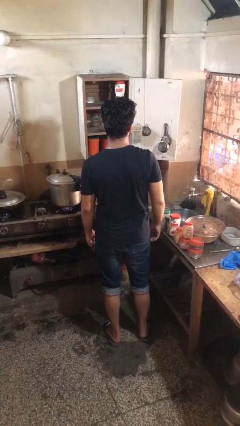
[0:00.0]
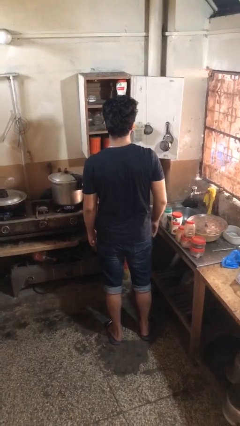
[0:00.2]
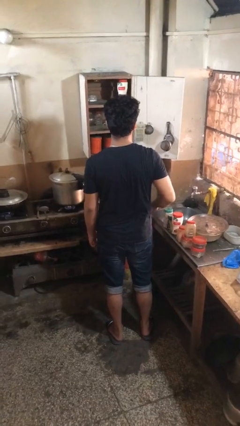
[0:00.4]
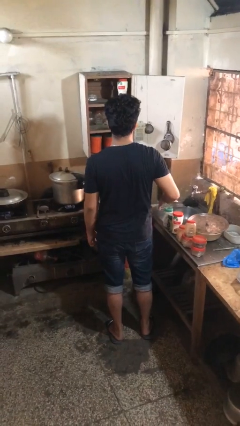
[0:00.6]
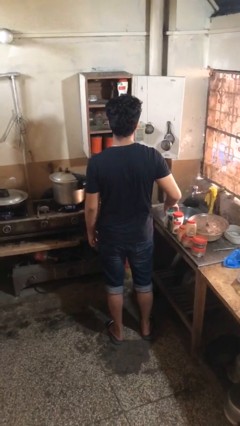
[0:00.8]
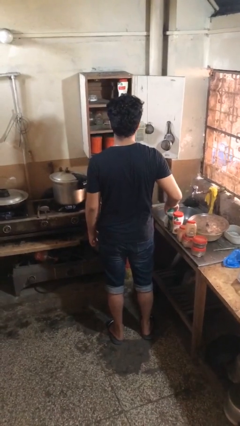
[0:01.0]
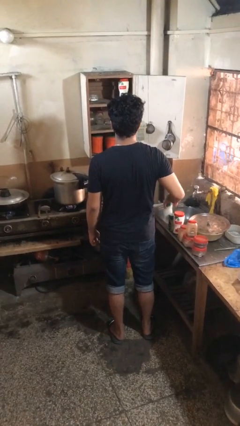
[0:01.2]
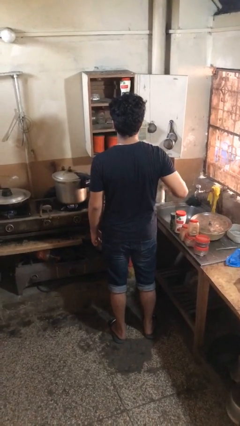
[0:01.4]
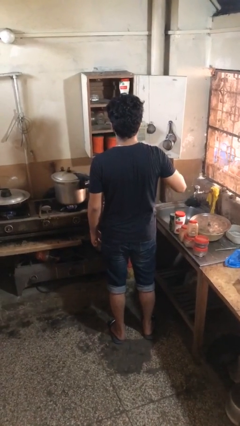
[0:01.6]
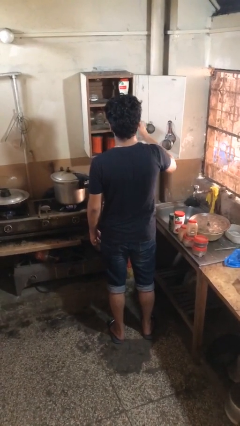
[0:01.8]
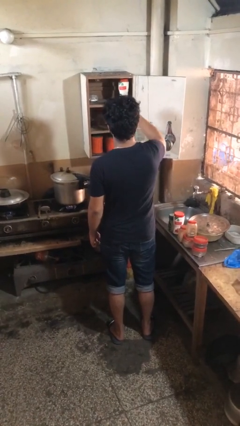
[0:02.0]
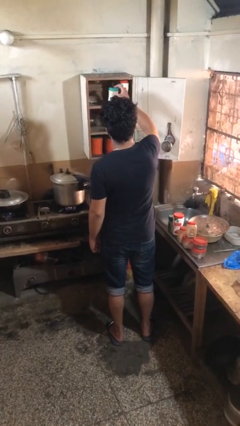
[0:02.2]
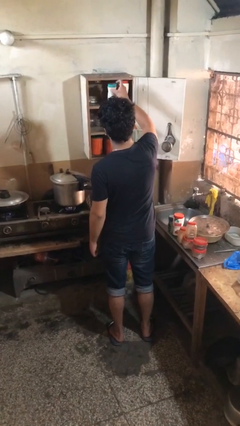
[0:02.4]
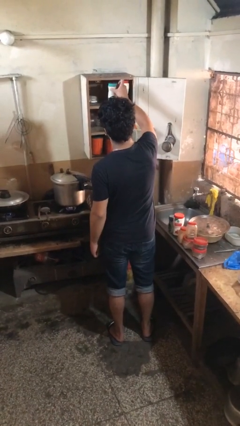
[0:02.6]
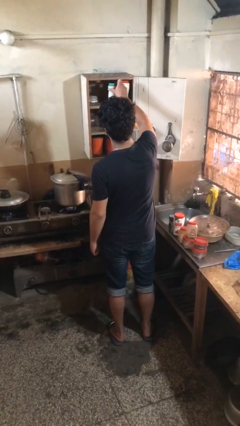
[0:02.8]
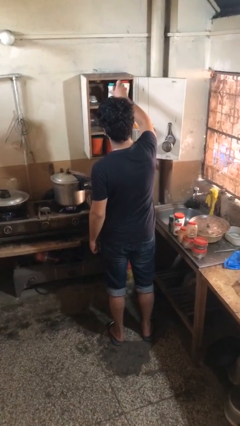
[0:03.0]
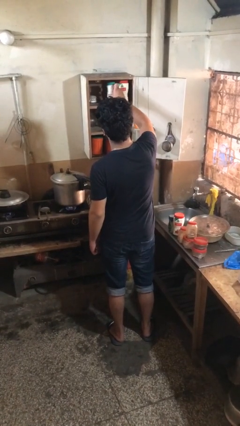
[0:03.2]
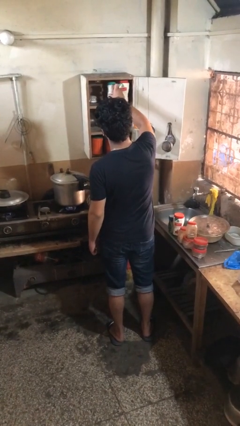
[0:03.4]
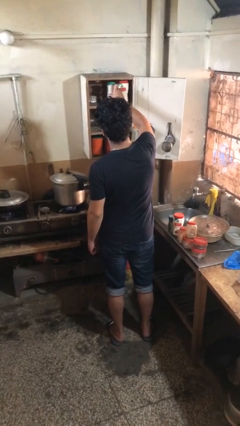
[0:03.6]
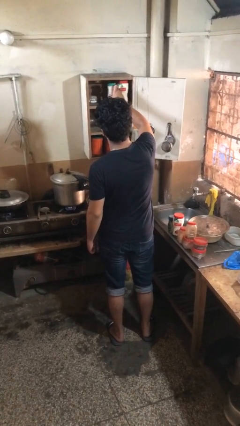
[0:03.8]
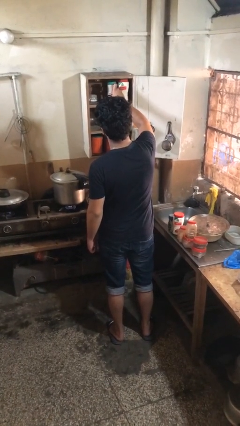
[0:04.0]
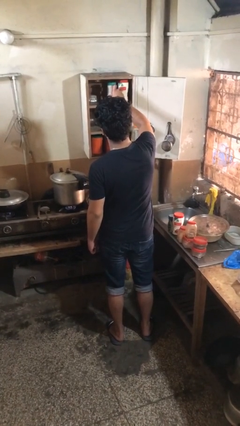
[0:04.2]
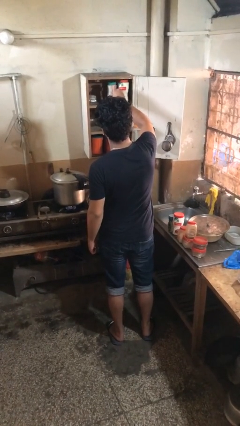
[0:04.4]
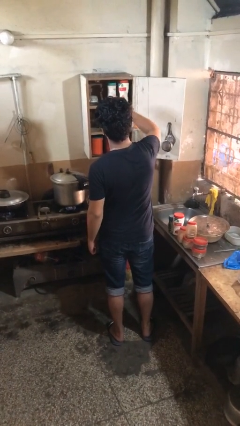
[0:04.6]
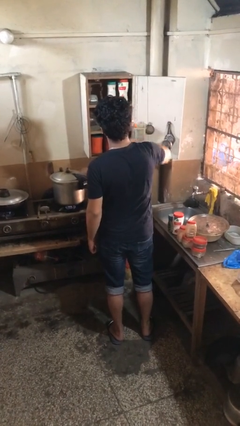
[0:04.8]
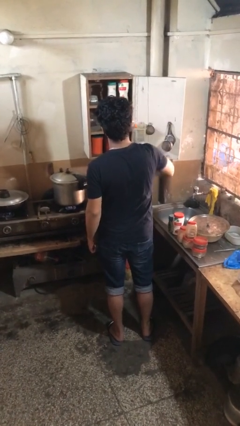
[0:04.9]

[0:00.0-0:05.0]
person loads groceries into cabinet

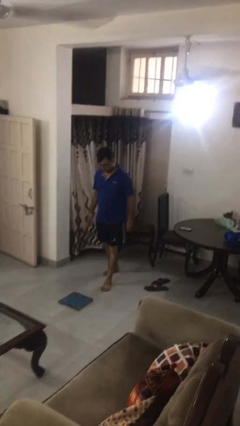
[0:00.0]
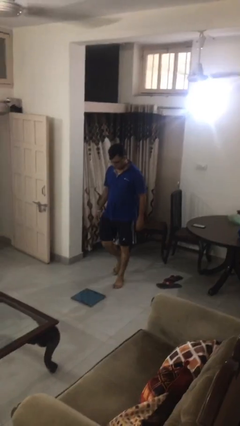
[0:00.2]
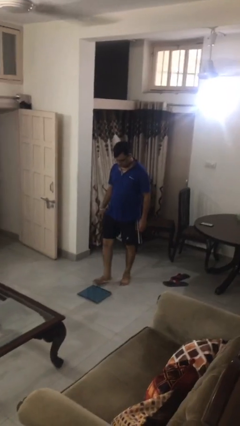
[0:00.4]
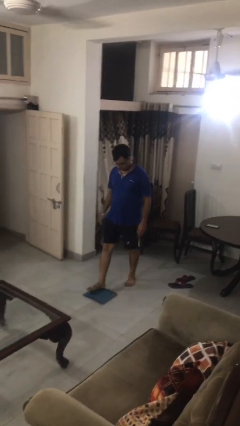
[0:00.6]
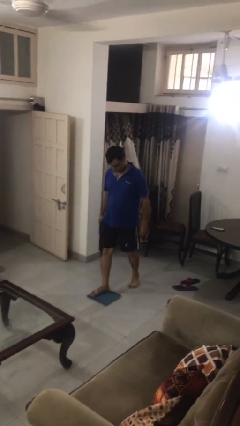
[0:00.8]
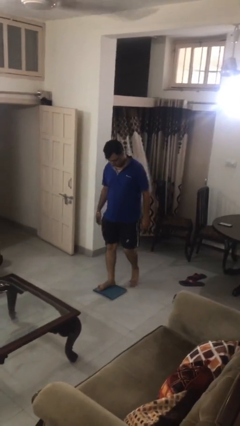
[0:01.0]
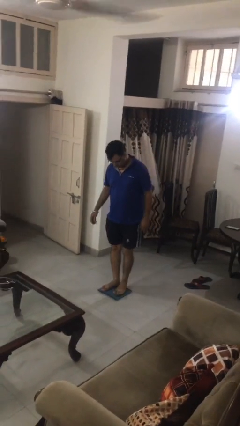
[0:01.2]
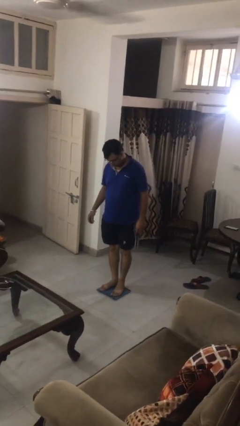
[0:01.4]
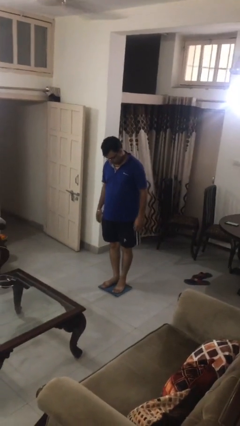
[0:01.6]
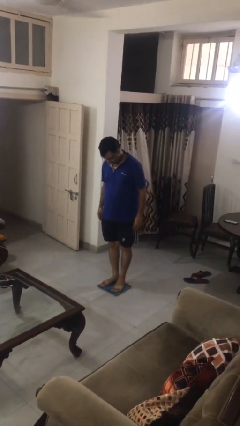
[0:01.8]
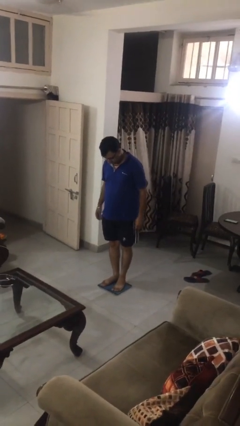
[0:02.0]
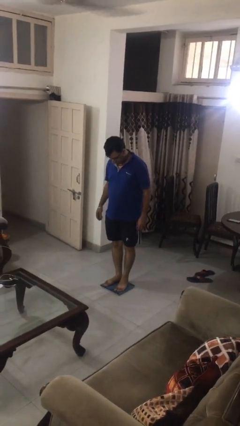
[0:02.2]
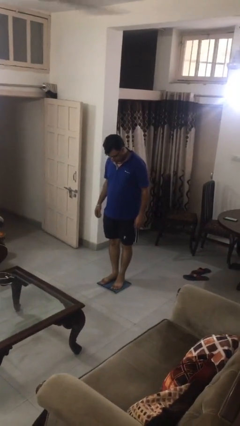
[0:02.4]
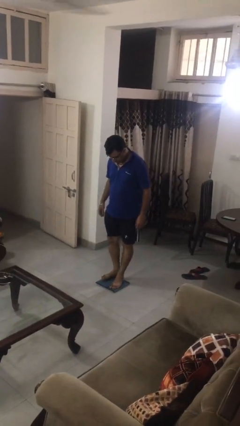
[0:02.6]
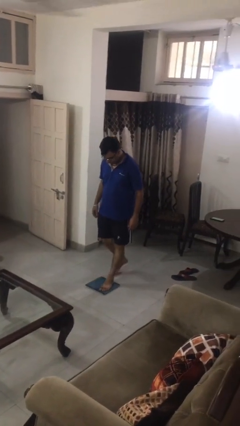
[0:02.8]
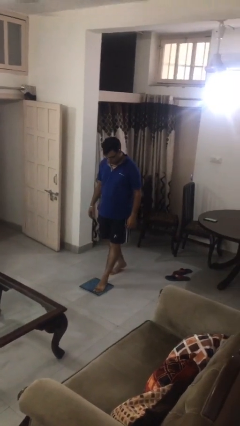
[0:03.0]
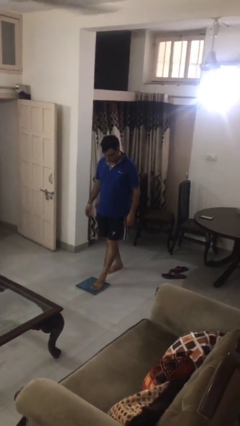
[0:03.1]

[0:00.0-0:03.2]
person uses bodyweight scale

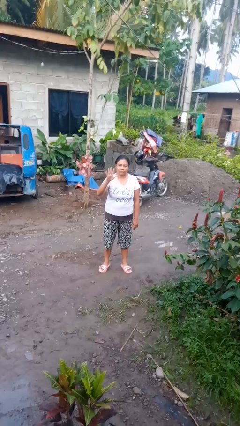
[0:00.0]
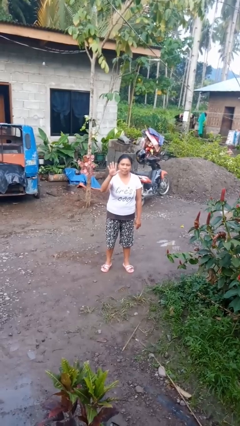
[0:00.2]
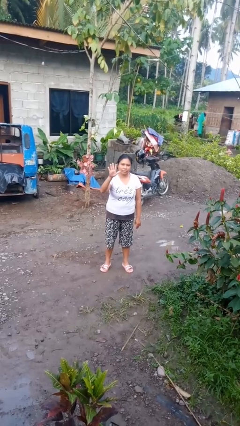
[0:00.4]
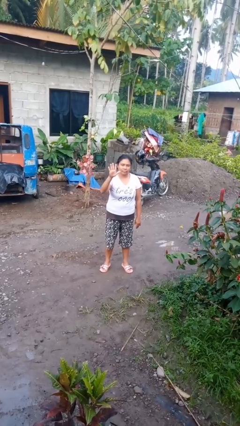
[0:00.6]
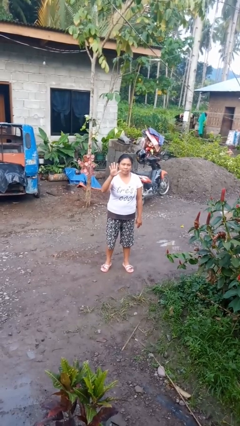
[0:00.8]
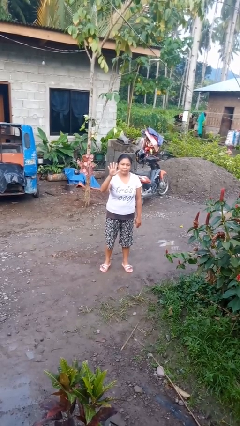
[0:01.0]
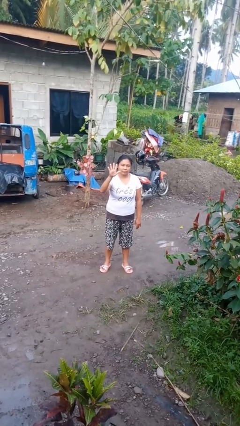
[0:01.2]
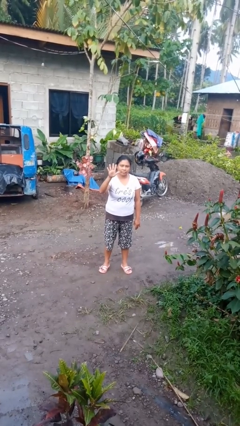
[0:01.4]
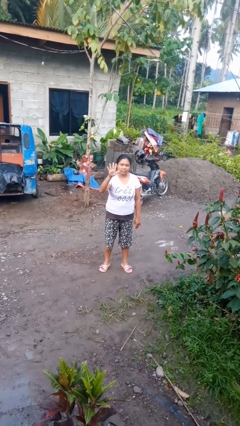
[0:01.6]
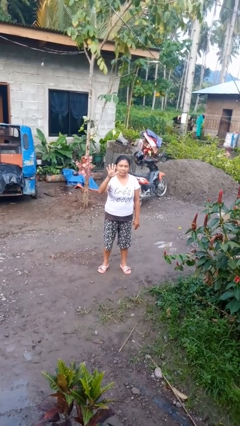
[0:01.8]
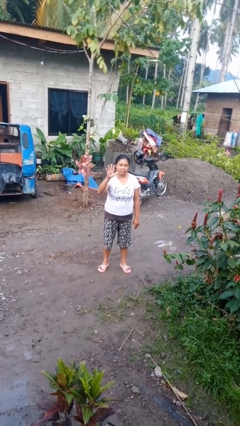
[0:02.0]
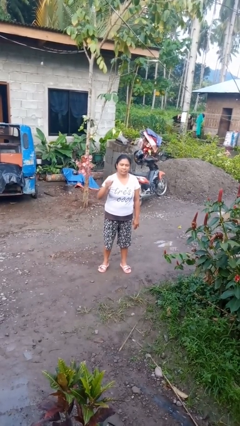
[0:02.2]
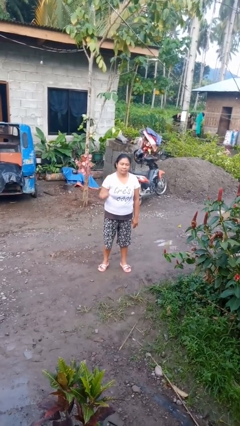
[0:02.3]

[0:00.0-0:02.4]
person gestures number five

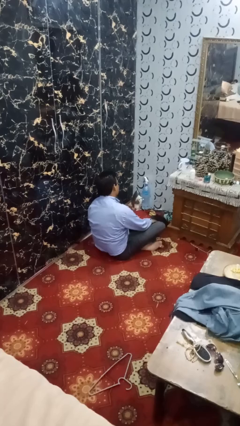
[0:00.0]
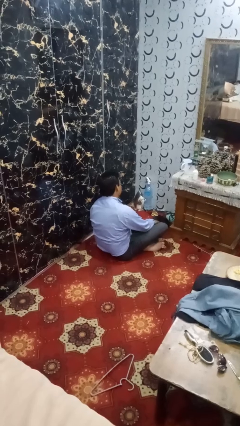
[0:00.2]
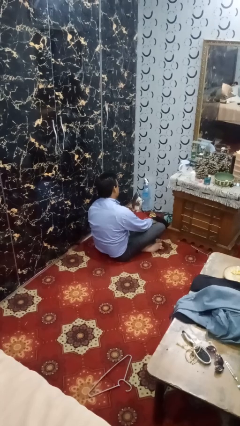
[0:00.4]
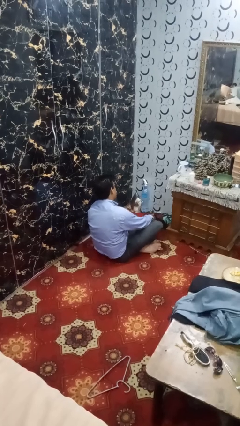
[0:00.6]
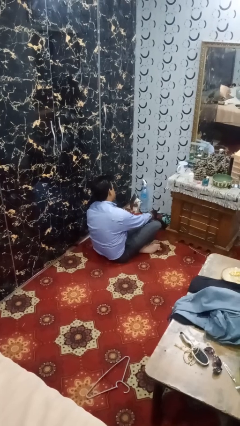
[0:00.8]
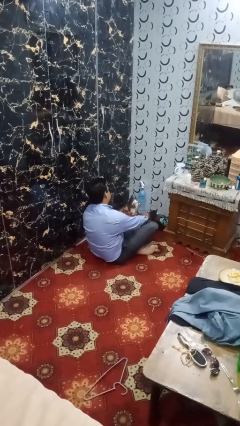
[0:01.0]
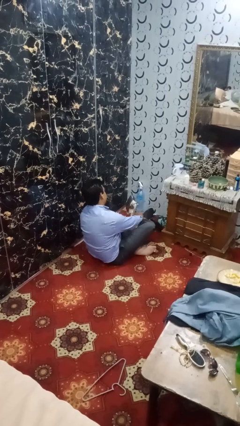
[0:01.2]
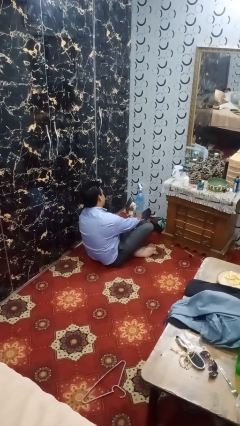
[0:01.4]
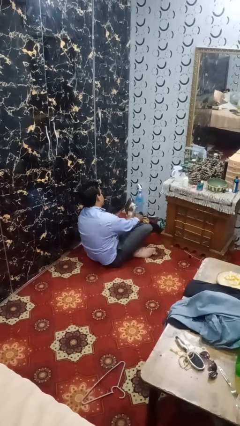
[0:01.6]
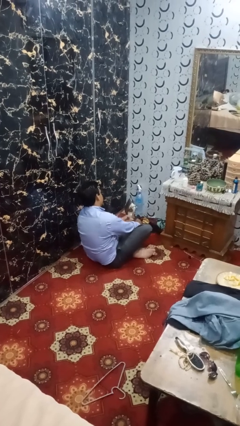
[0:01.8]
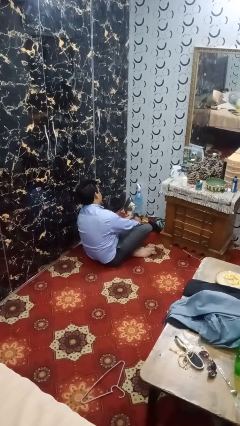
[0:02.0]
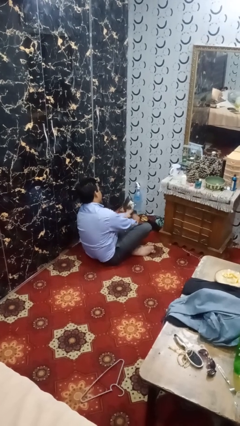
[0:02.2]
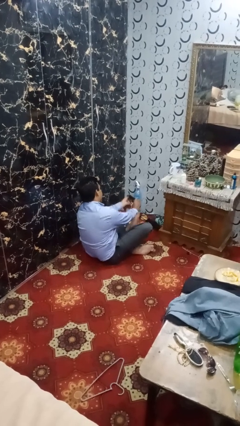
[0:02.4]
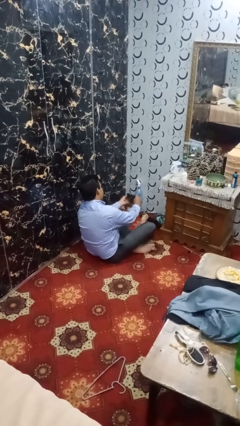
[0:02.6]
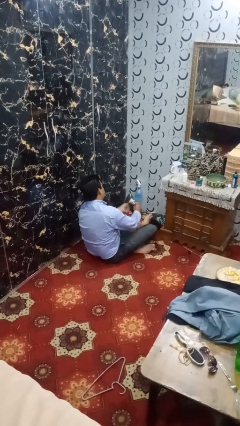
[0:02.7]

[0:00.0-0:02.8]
person takes off socks

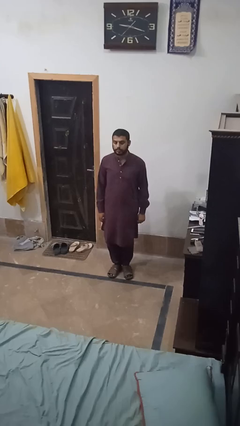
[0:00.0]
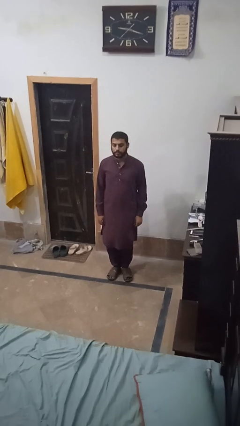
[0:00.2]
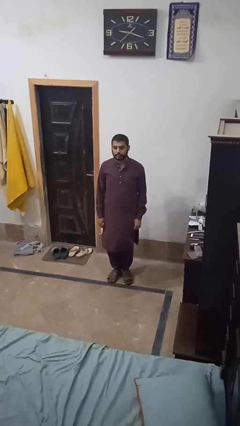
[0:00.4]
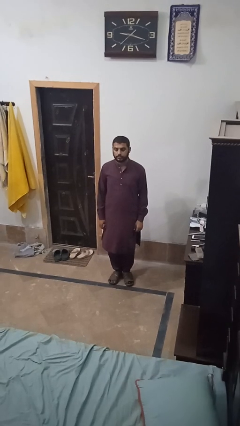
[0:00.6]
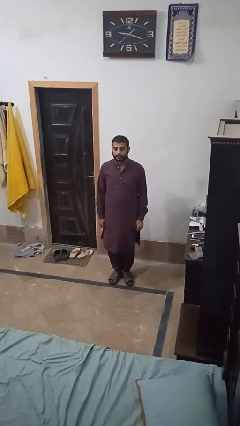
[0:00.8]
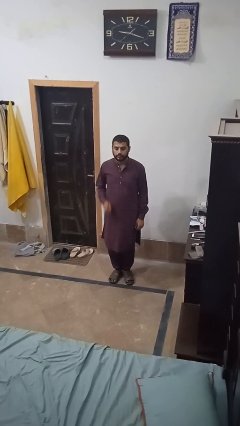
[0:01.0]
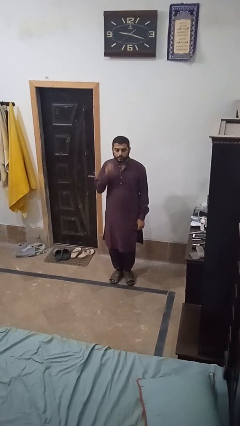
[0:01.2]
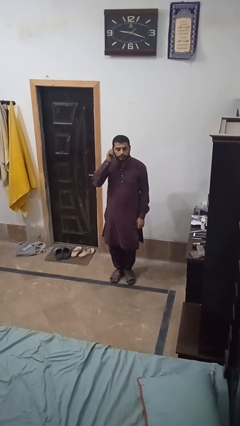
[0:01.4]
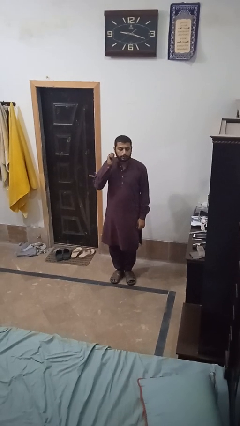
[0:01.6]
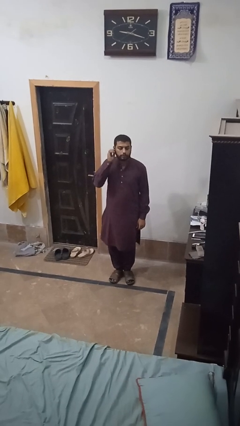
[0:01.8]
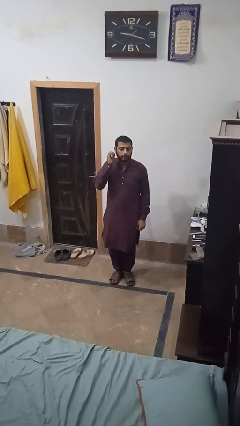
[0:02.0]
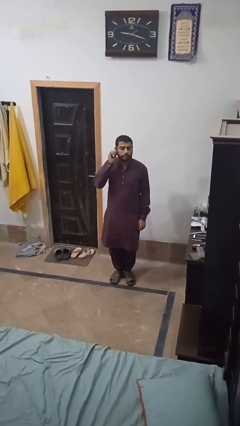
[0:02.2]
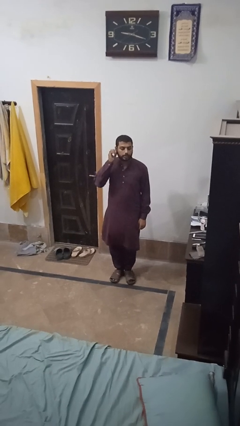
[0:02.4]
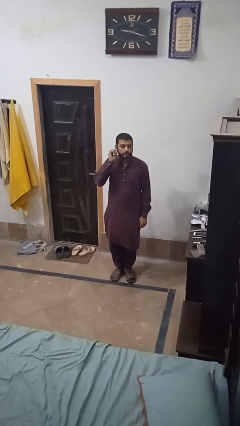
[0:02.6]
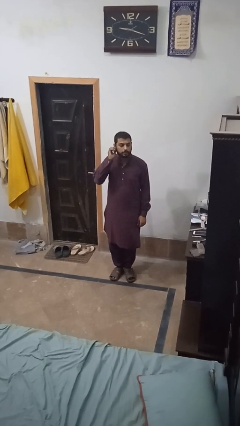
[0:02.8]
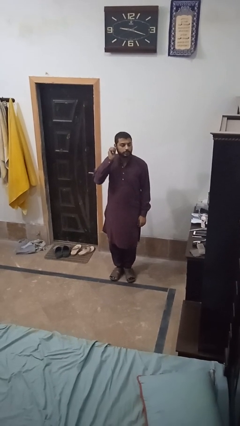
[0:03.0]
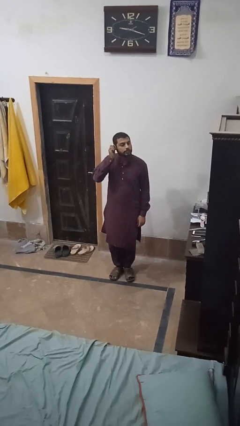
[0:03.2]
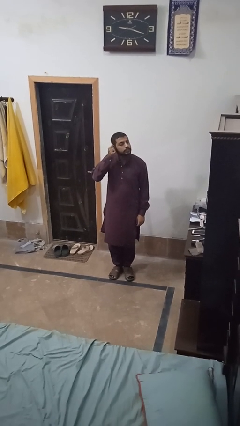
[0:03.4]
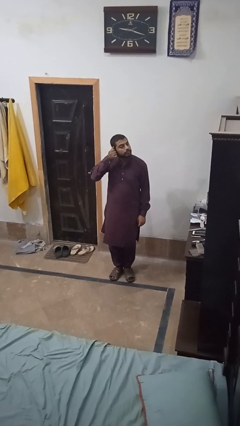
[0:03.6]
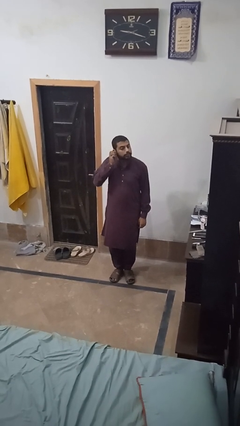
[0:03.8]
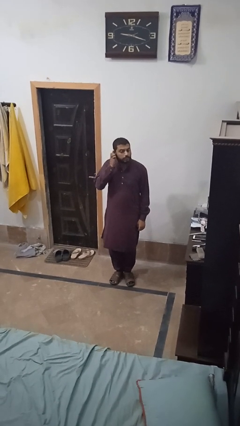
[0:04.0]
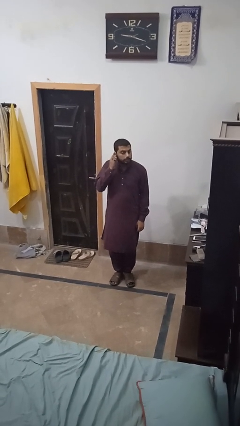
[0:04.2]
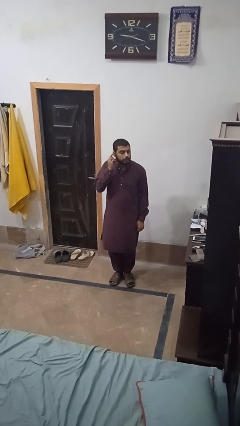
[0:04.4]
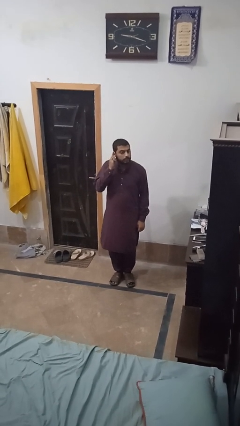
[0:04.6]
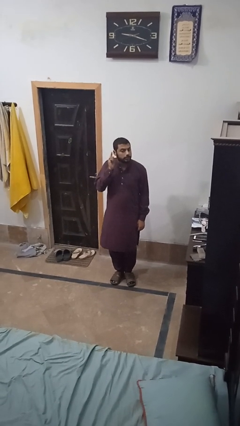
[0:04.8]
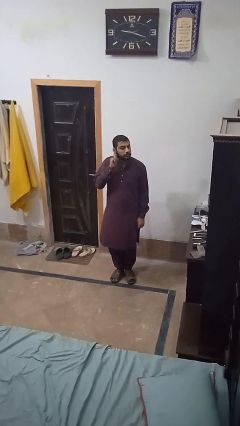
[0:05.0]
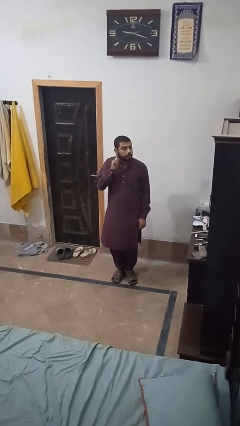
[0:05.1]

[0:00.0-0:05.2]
person touches earlobe
